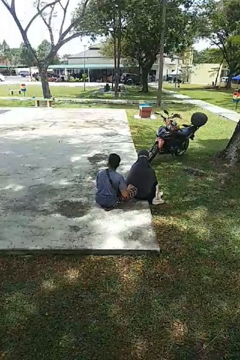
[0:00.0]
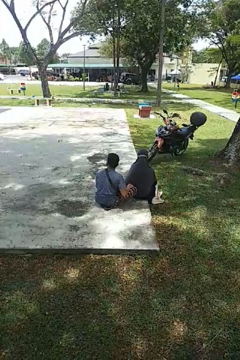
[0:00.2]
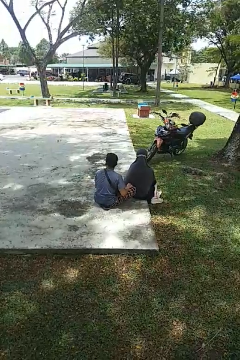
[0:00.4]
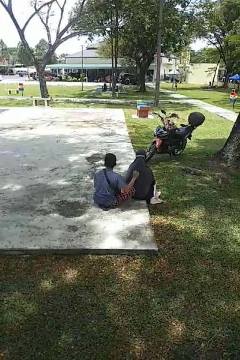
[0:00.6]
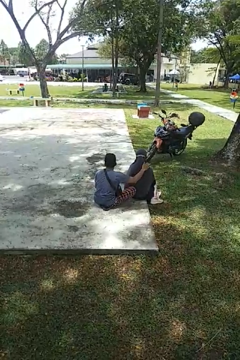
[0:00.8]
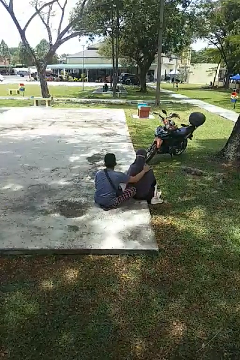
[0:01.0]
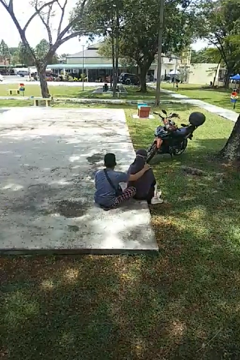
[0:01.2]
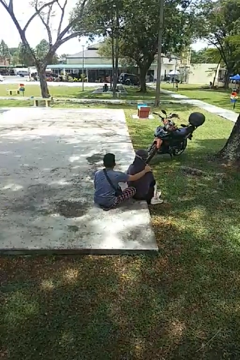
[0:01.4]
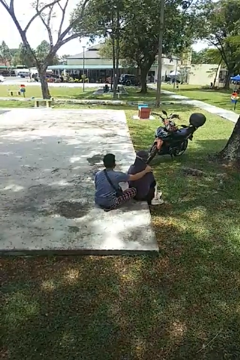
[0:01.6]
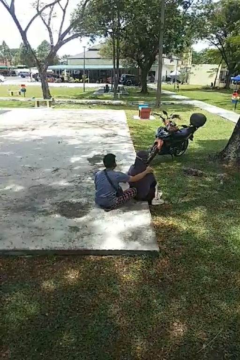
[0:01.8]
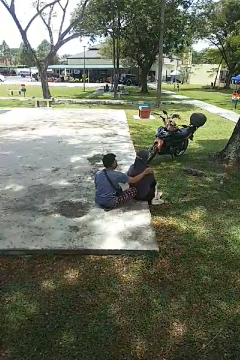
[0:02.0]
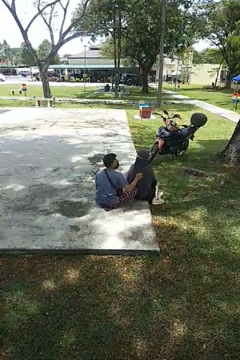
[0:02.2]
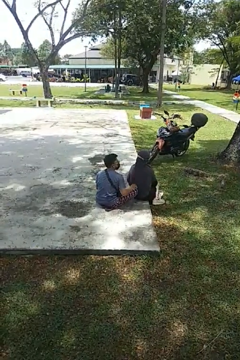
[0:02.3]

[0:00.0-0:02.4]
person pounds shoulders of person

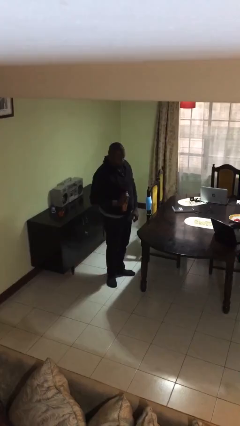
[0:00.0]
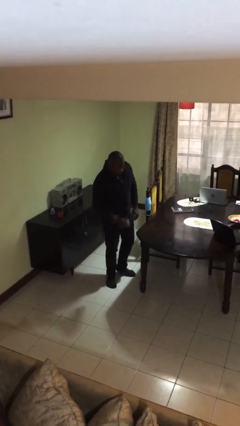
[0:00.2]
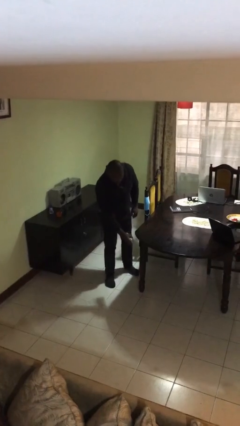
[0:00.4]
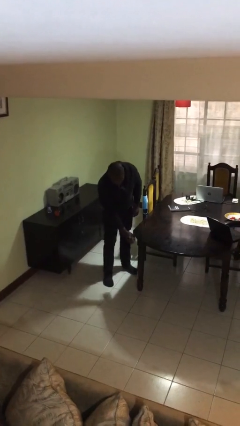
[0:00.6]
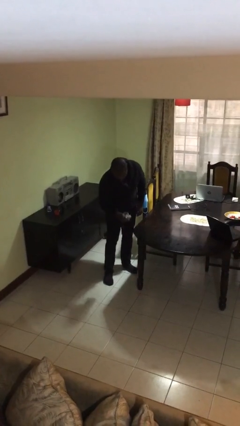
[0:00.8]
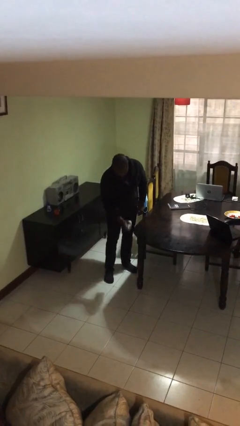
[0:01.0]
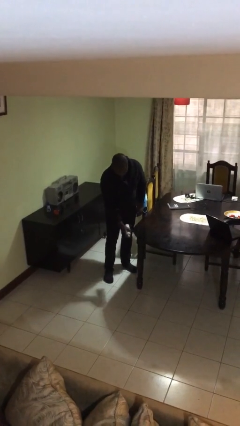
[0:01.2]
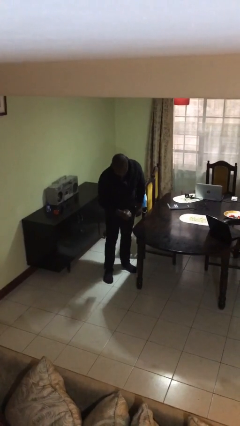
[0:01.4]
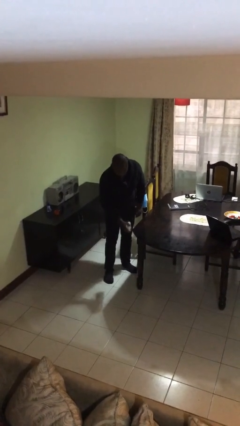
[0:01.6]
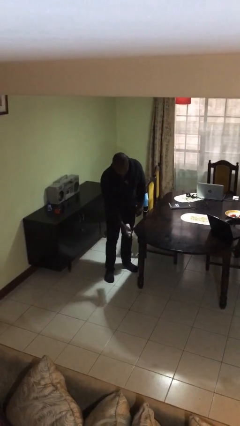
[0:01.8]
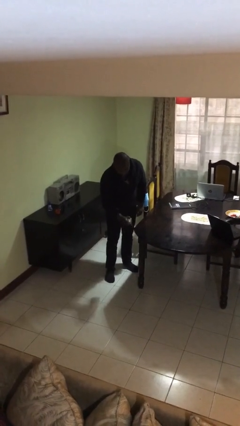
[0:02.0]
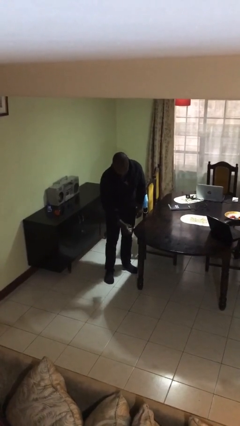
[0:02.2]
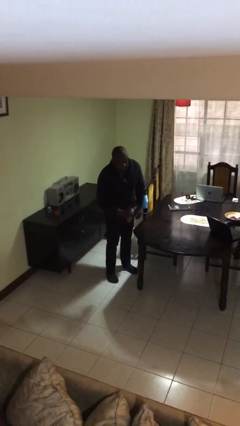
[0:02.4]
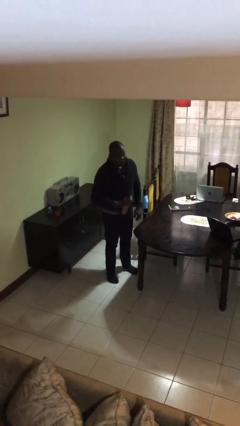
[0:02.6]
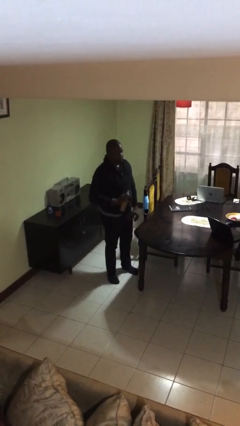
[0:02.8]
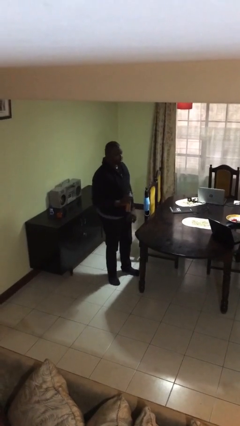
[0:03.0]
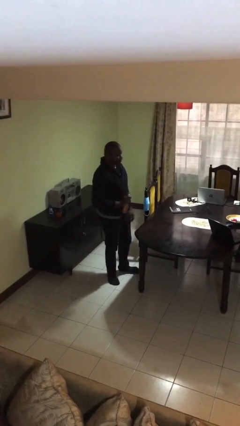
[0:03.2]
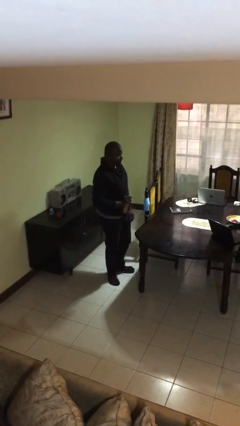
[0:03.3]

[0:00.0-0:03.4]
person sprays from bottle

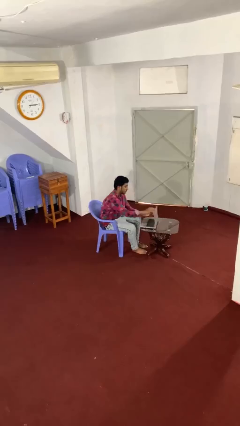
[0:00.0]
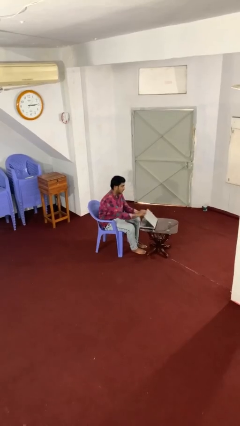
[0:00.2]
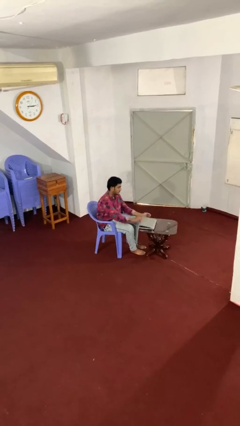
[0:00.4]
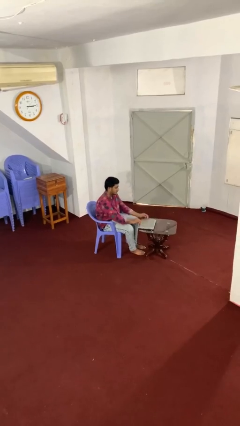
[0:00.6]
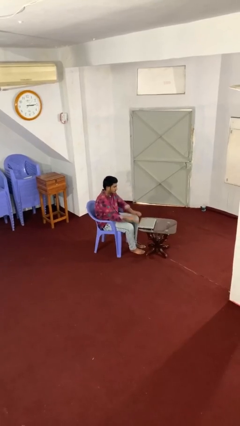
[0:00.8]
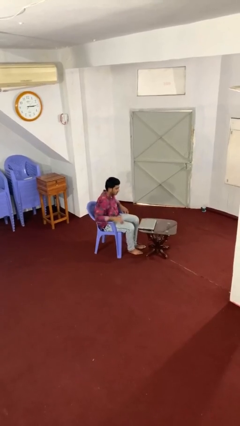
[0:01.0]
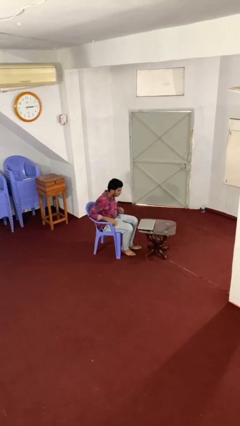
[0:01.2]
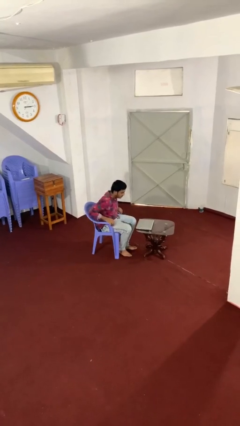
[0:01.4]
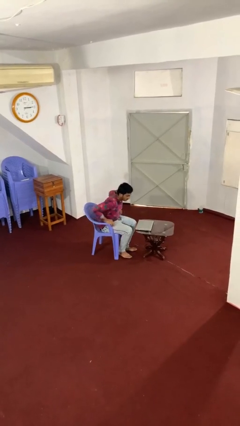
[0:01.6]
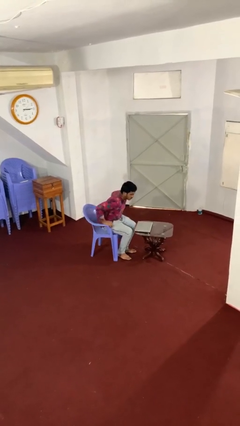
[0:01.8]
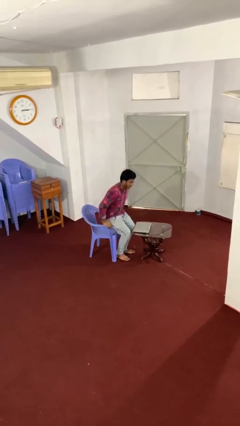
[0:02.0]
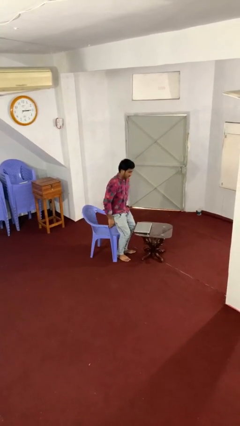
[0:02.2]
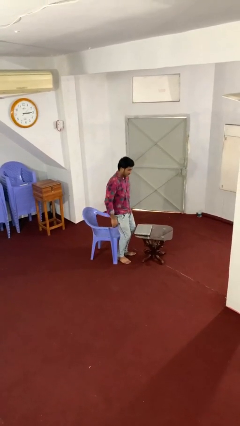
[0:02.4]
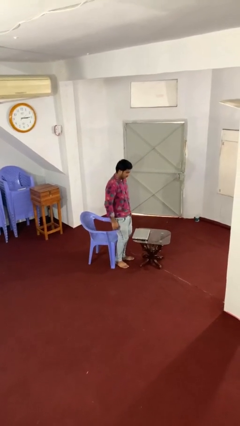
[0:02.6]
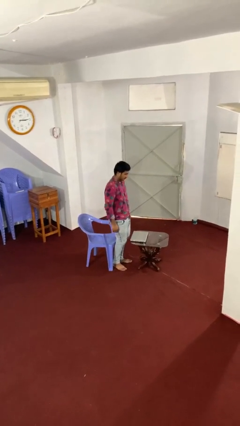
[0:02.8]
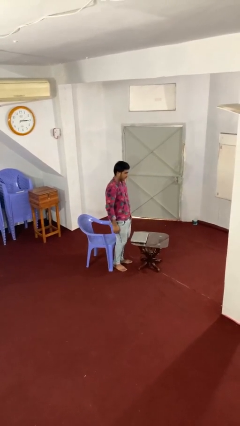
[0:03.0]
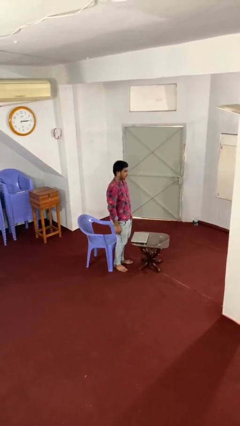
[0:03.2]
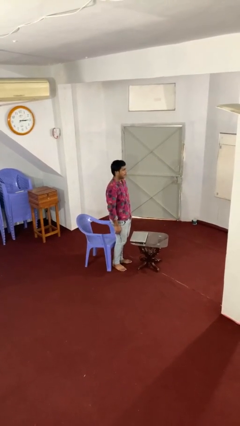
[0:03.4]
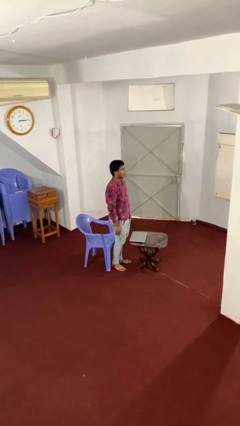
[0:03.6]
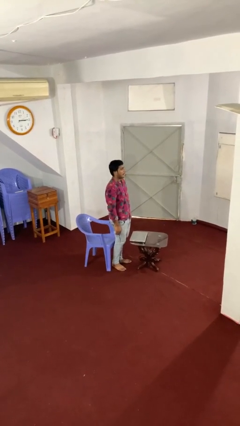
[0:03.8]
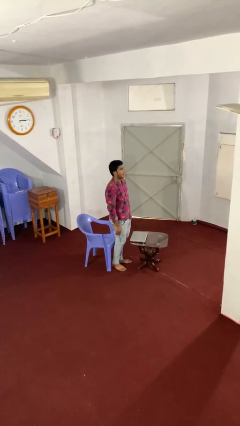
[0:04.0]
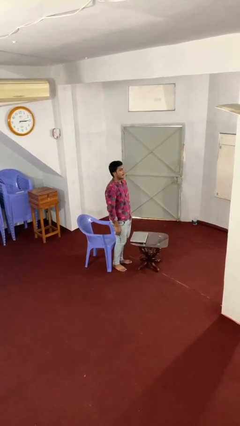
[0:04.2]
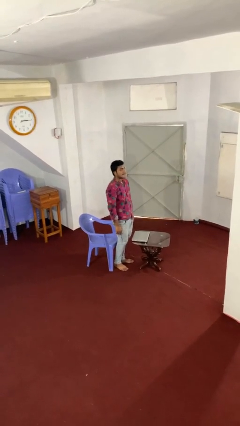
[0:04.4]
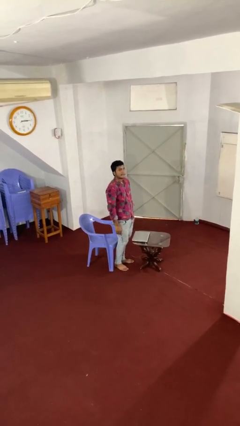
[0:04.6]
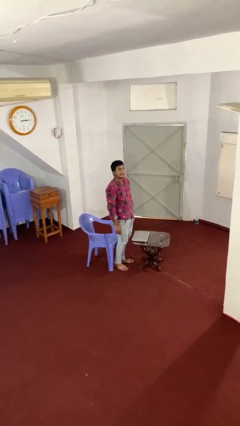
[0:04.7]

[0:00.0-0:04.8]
person stands up

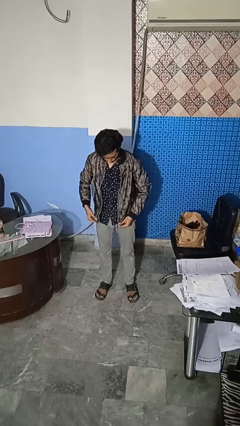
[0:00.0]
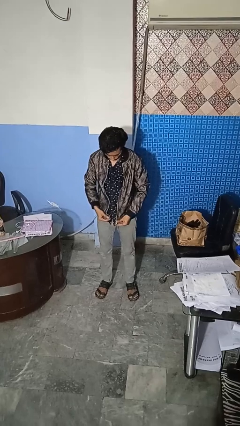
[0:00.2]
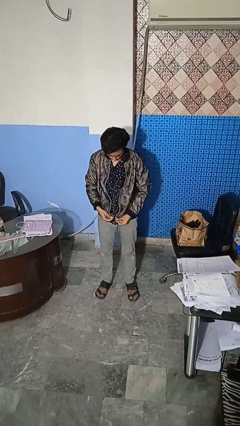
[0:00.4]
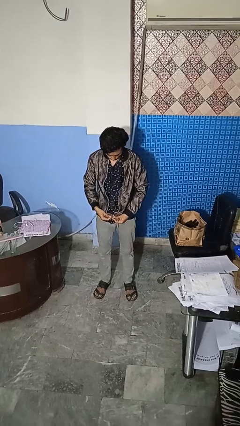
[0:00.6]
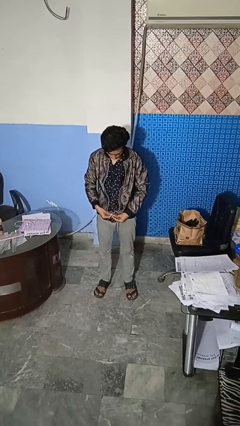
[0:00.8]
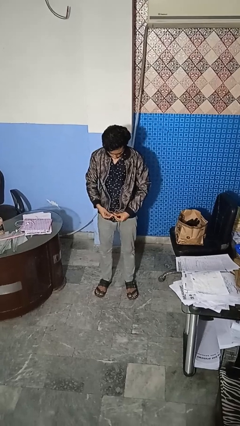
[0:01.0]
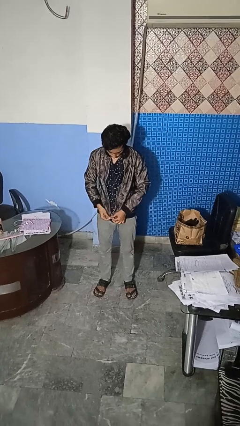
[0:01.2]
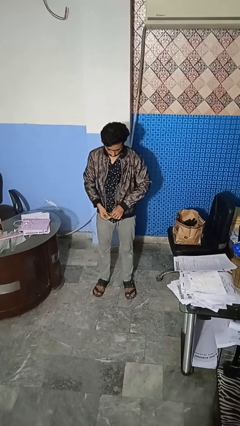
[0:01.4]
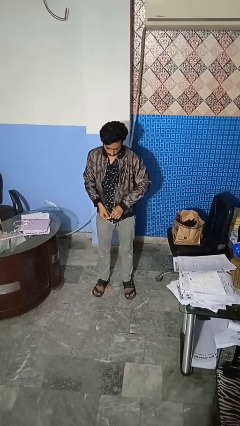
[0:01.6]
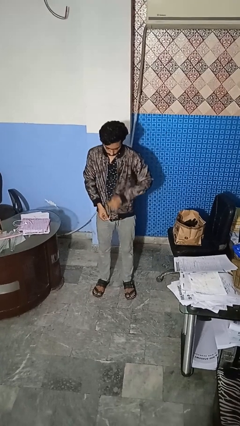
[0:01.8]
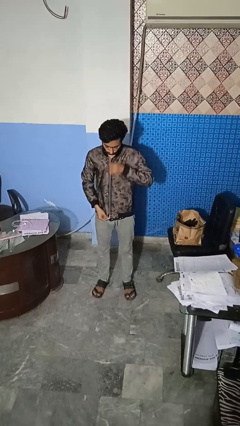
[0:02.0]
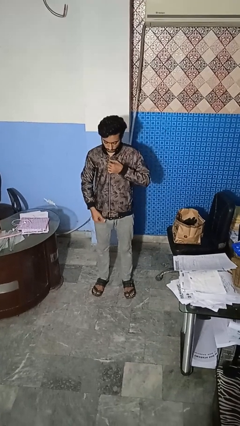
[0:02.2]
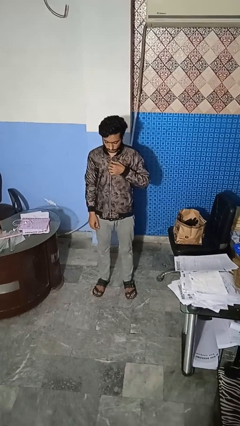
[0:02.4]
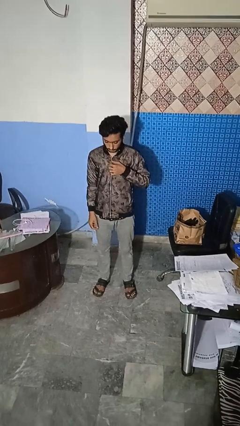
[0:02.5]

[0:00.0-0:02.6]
person zips up jacket

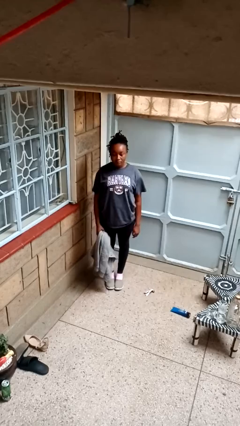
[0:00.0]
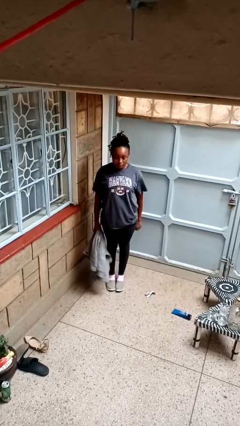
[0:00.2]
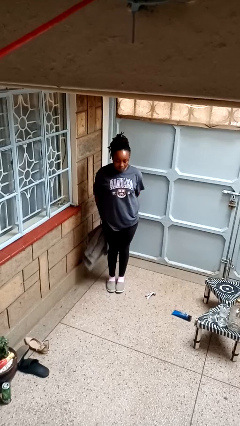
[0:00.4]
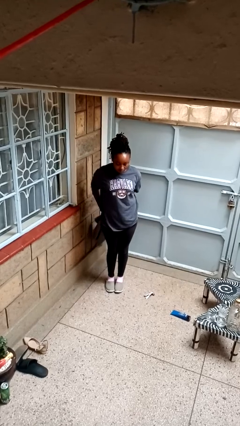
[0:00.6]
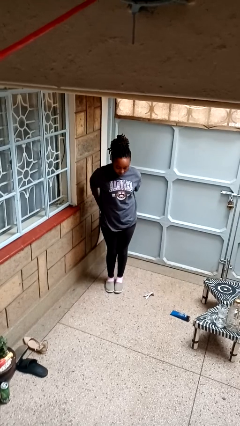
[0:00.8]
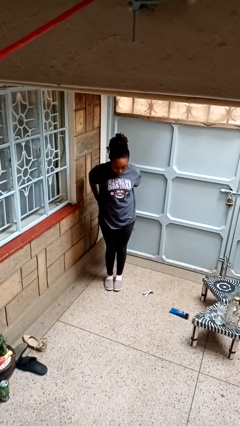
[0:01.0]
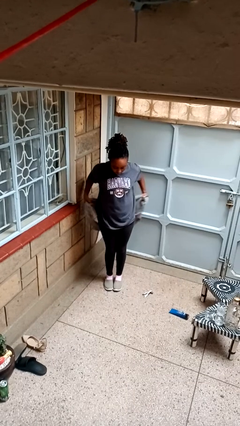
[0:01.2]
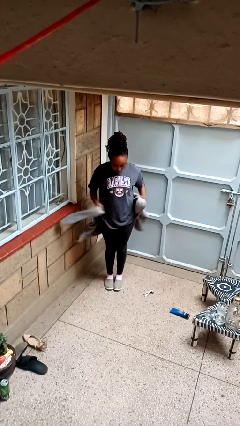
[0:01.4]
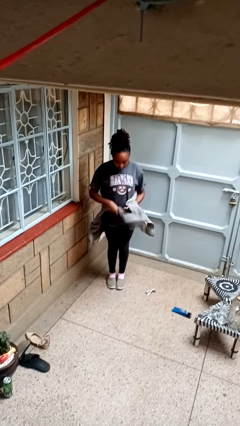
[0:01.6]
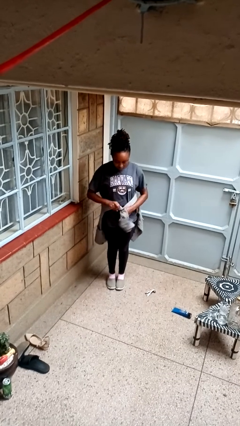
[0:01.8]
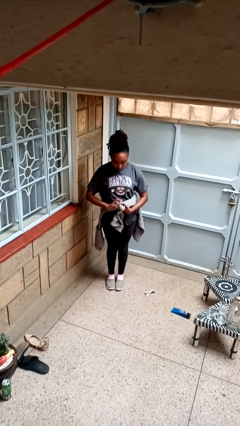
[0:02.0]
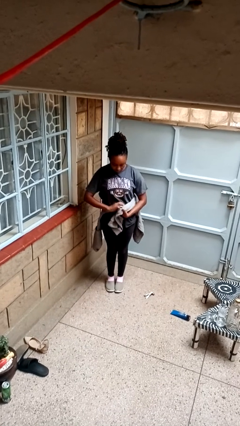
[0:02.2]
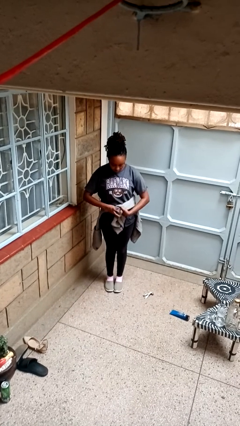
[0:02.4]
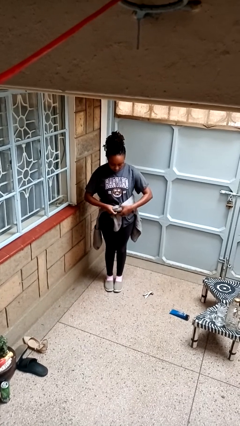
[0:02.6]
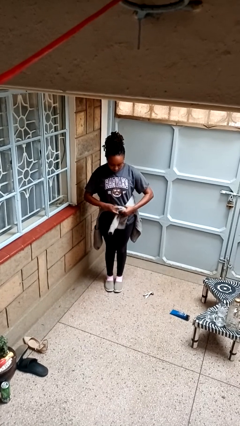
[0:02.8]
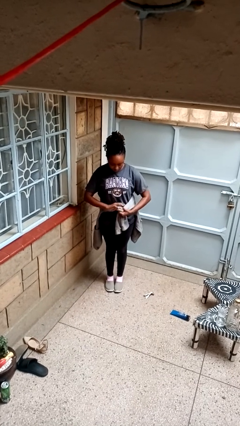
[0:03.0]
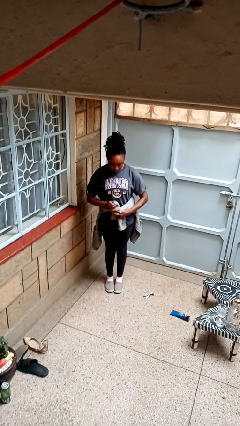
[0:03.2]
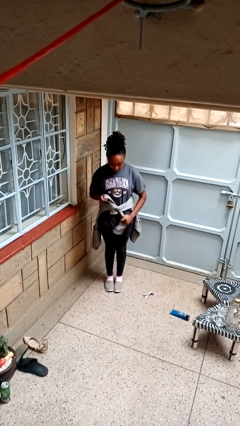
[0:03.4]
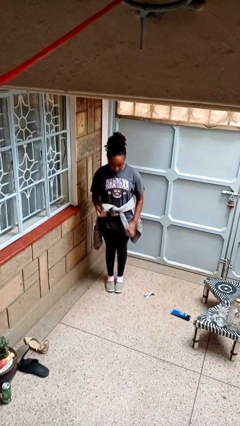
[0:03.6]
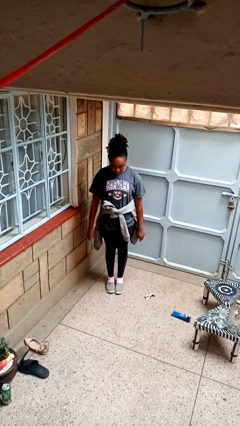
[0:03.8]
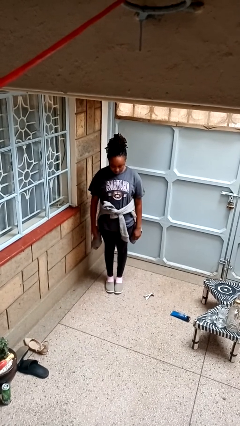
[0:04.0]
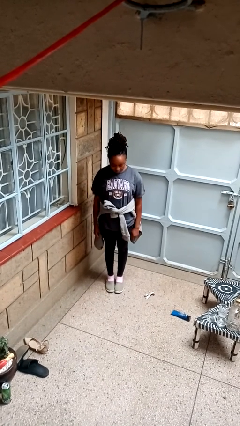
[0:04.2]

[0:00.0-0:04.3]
person ties jacket around waist

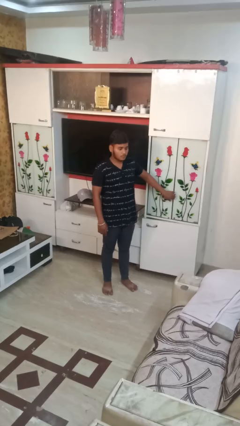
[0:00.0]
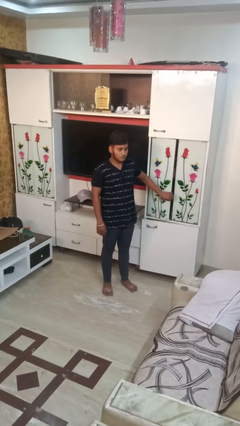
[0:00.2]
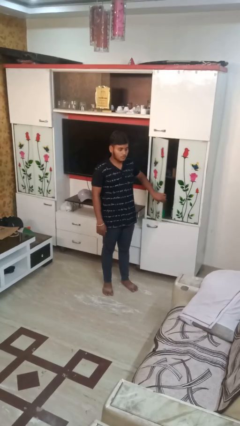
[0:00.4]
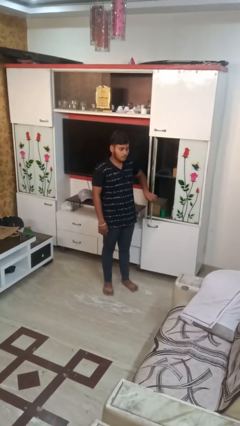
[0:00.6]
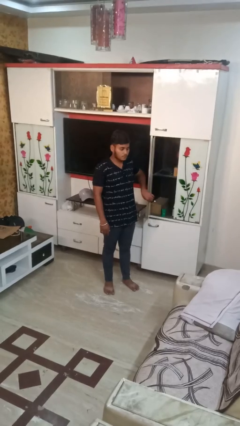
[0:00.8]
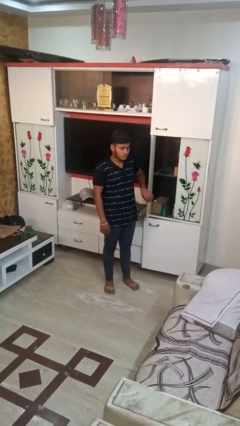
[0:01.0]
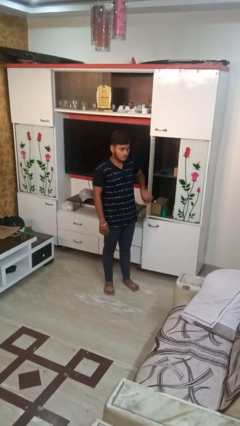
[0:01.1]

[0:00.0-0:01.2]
person opens closet door
